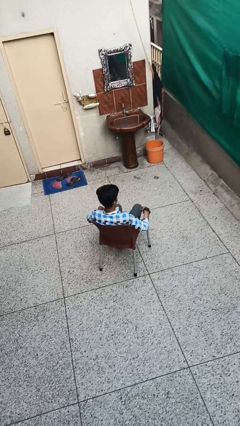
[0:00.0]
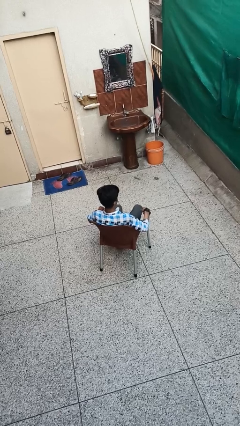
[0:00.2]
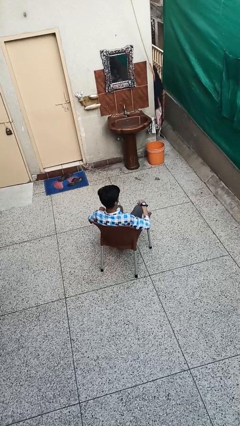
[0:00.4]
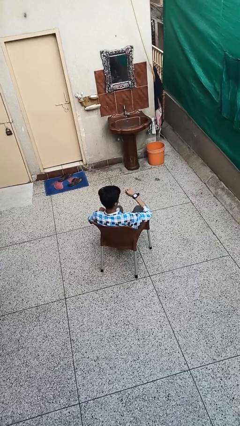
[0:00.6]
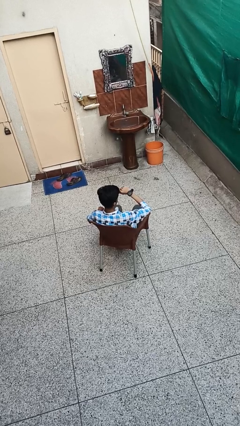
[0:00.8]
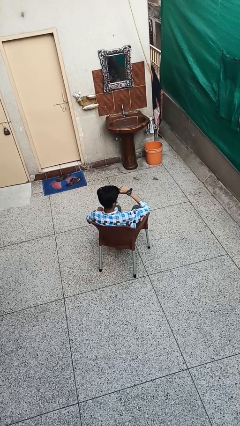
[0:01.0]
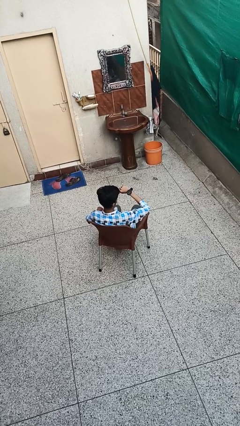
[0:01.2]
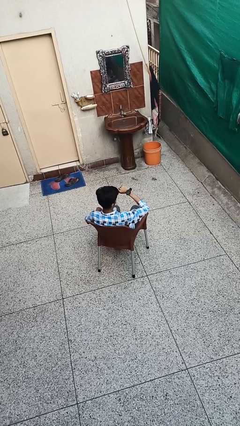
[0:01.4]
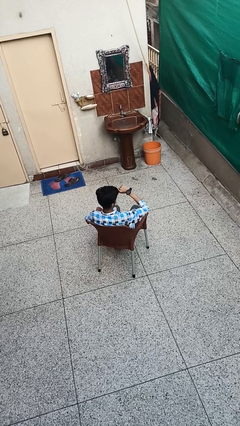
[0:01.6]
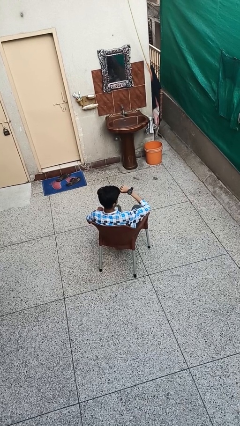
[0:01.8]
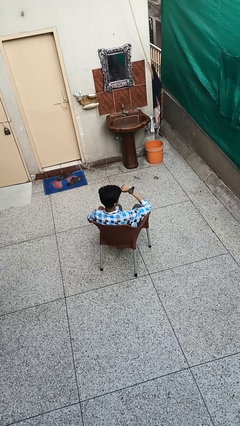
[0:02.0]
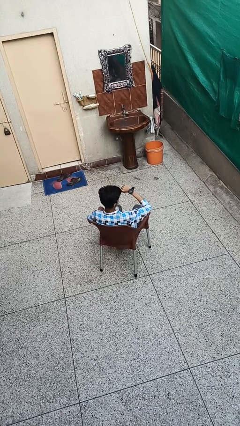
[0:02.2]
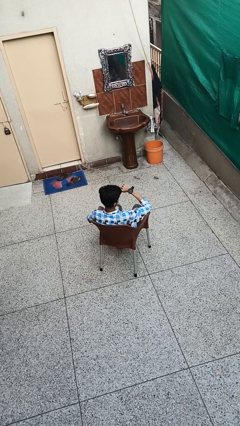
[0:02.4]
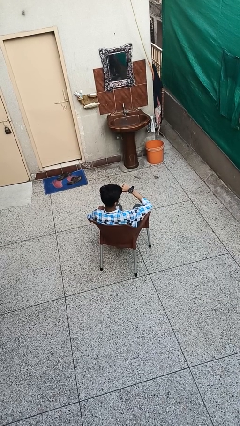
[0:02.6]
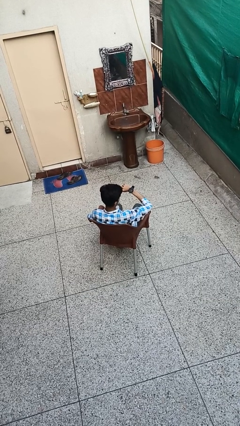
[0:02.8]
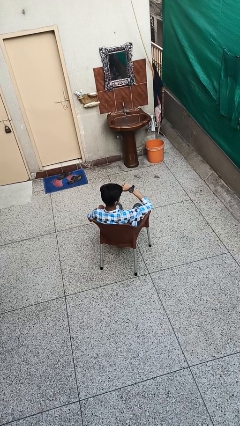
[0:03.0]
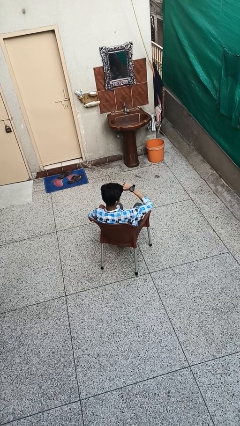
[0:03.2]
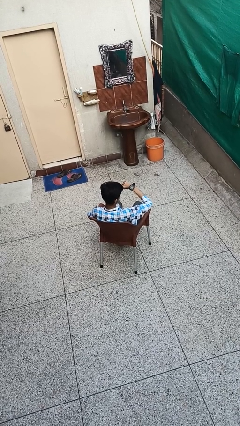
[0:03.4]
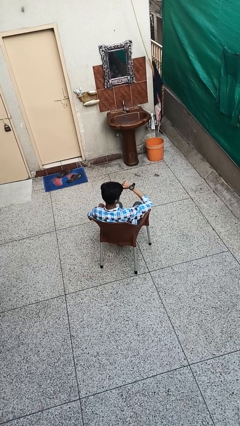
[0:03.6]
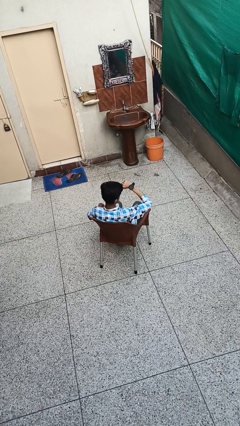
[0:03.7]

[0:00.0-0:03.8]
person looks at wristwatch

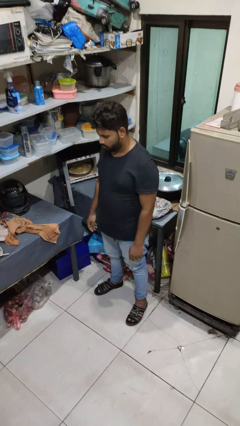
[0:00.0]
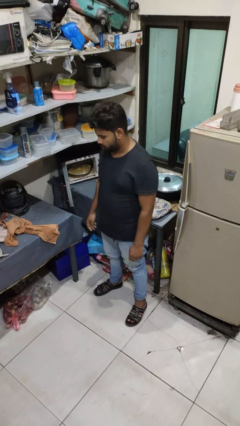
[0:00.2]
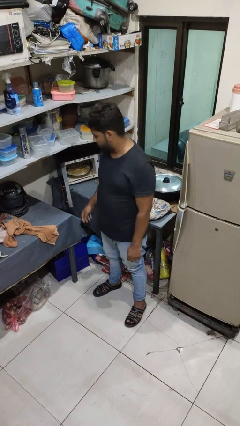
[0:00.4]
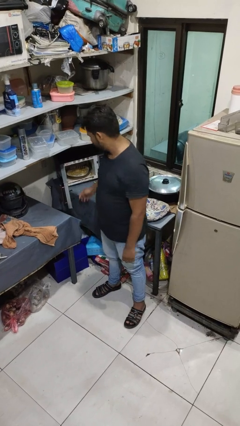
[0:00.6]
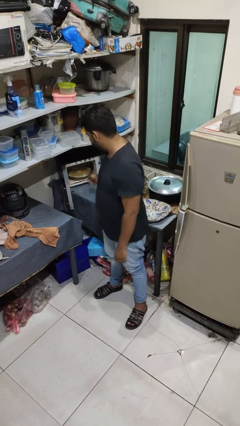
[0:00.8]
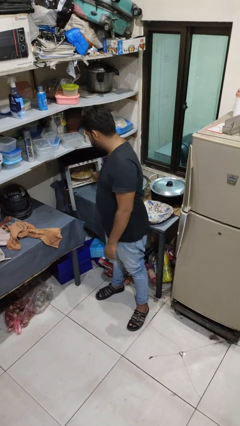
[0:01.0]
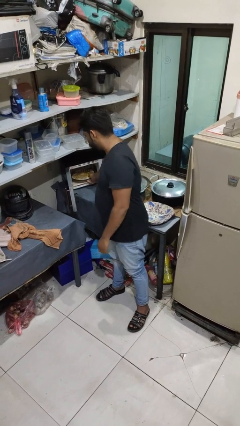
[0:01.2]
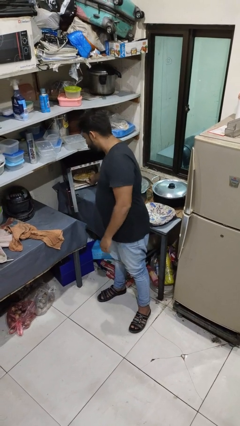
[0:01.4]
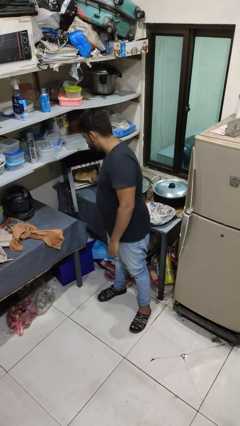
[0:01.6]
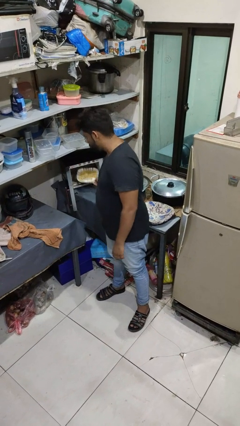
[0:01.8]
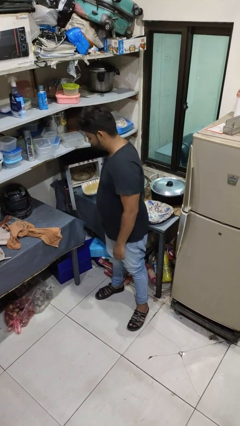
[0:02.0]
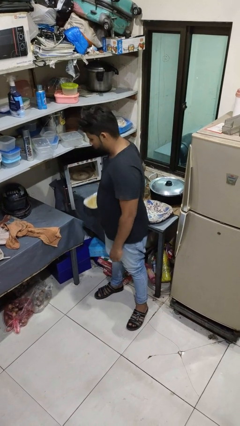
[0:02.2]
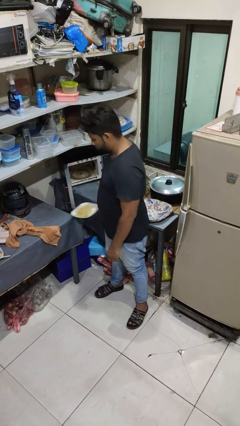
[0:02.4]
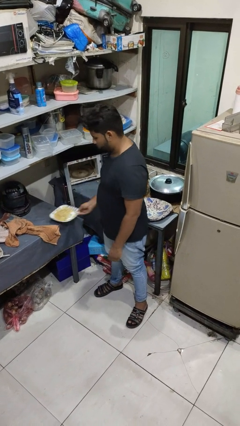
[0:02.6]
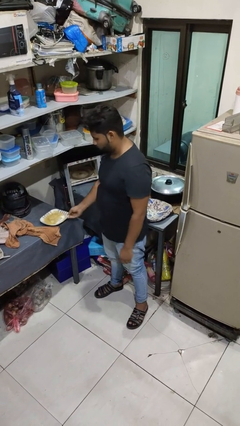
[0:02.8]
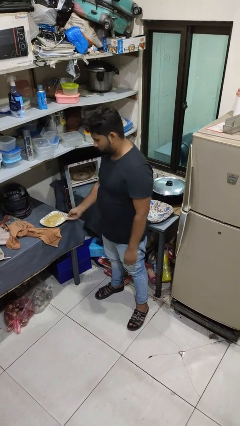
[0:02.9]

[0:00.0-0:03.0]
person takes object from microwave

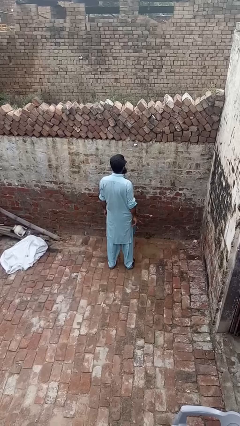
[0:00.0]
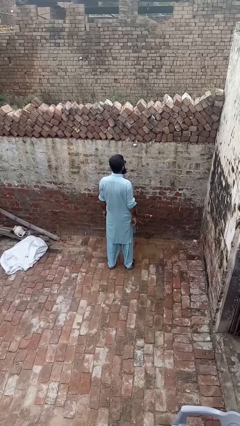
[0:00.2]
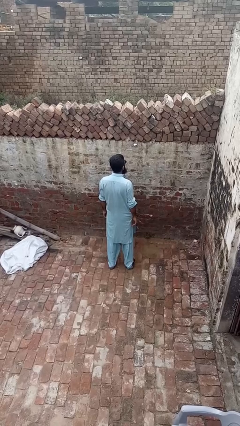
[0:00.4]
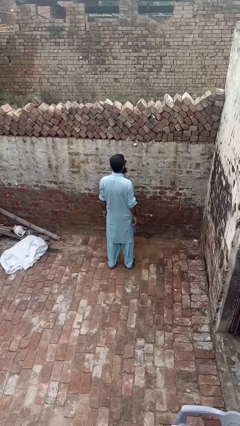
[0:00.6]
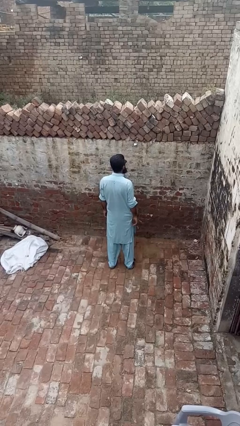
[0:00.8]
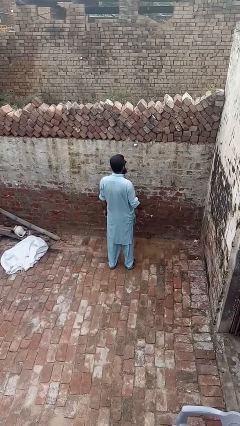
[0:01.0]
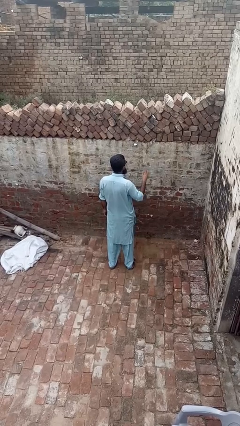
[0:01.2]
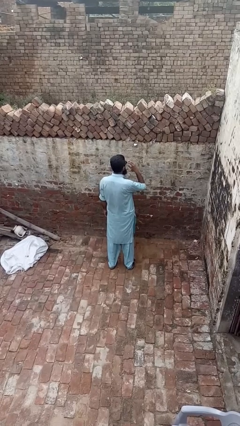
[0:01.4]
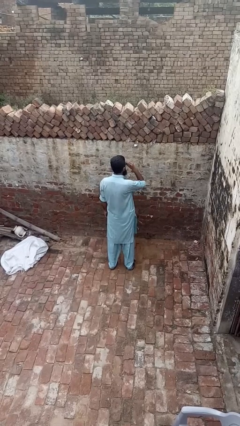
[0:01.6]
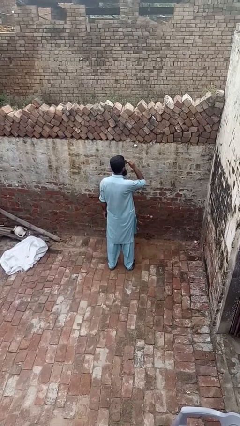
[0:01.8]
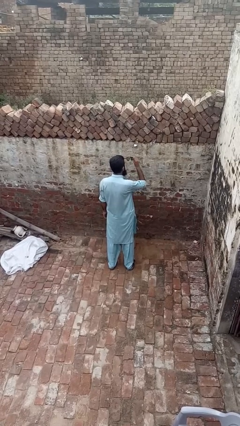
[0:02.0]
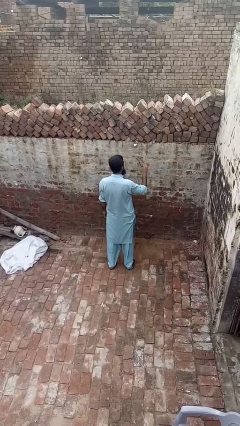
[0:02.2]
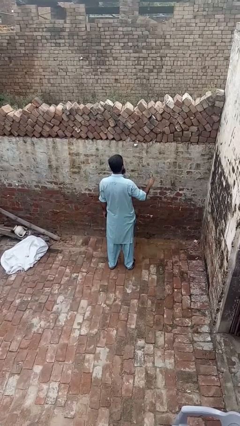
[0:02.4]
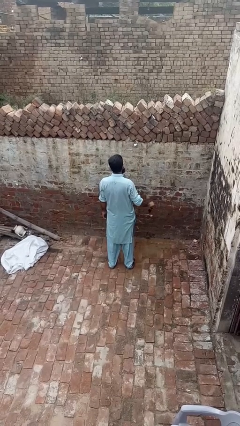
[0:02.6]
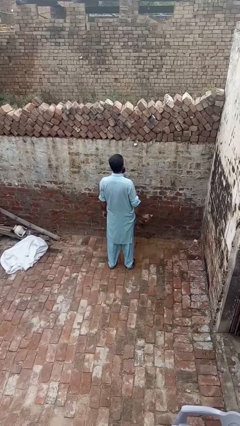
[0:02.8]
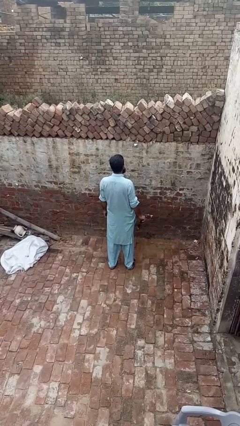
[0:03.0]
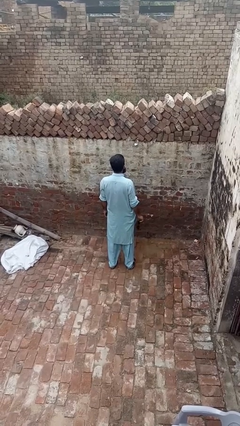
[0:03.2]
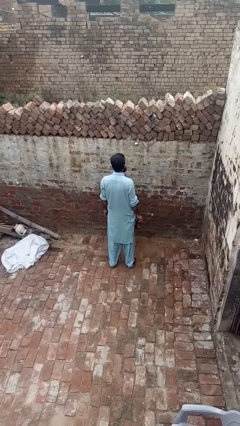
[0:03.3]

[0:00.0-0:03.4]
person takes off sunglasses

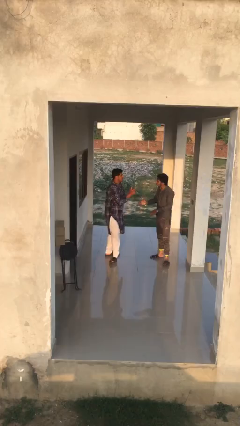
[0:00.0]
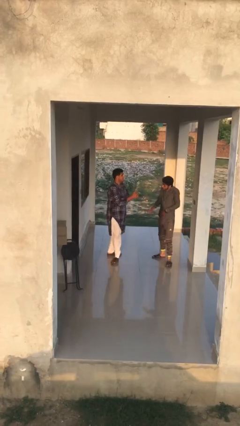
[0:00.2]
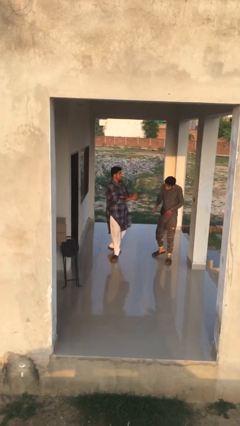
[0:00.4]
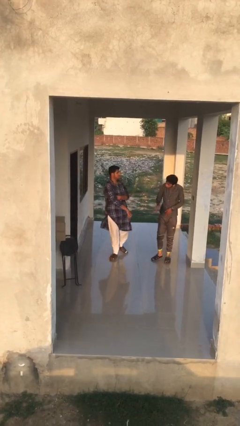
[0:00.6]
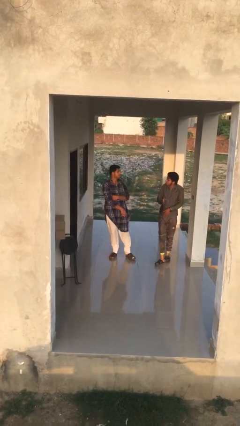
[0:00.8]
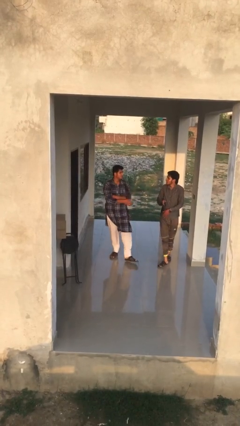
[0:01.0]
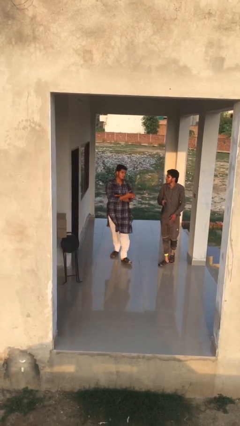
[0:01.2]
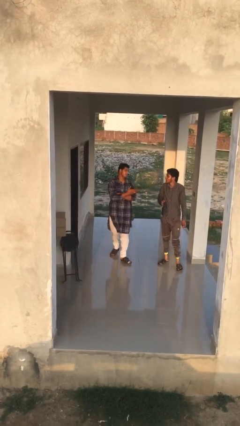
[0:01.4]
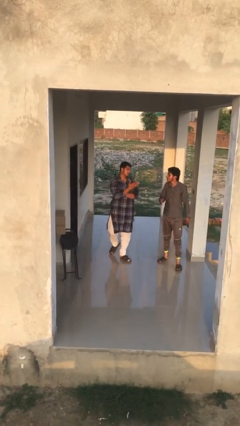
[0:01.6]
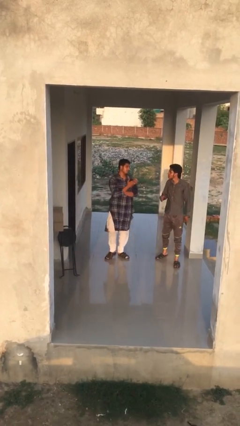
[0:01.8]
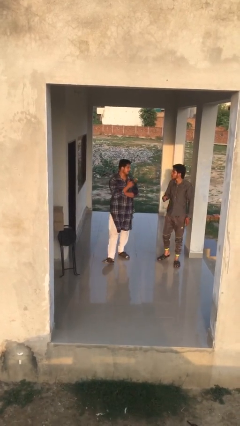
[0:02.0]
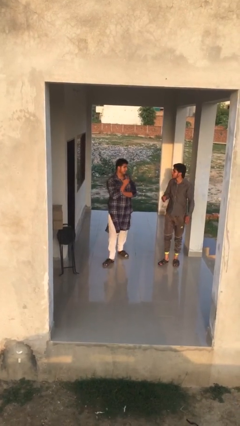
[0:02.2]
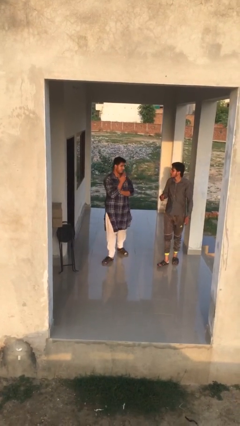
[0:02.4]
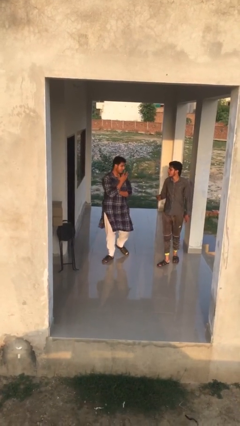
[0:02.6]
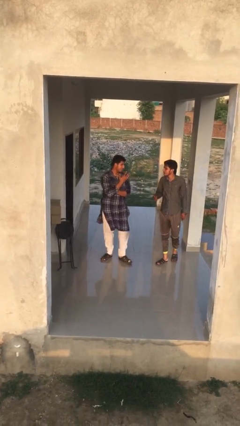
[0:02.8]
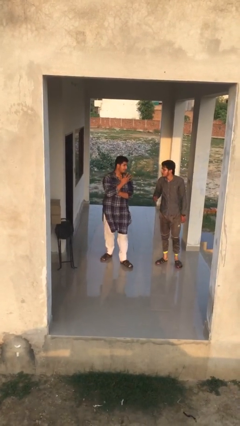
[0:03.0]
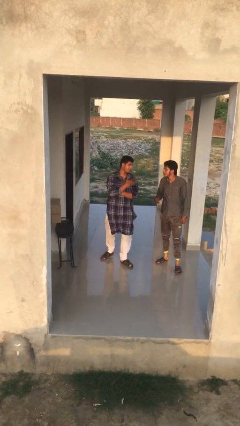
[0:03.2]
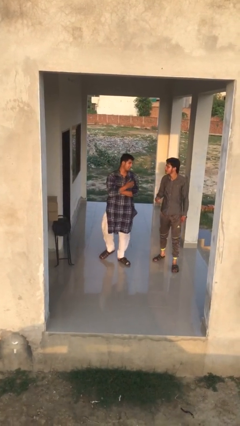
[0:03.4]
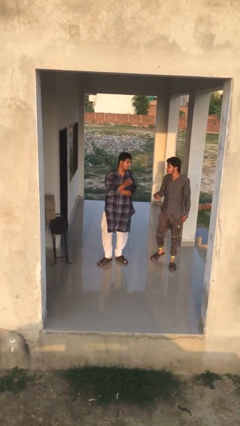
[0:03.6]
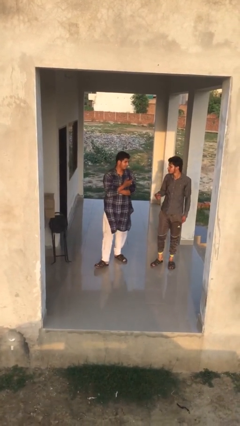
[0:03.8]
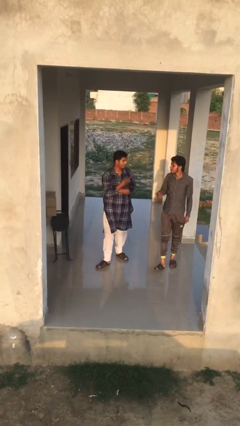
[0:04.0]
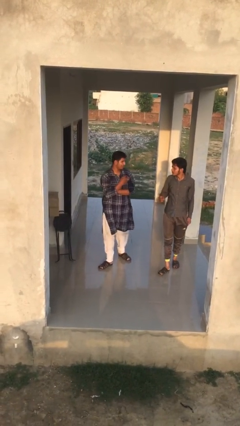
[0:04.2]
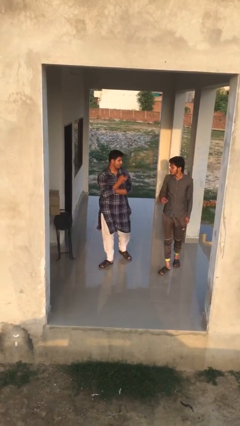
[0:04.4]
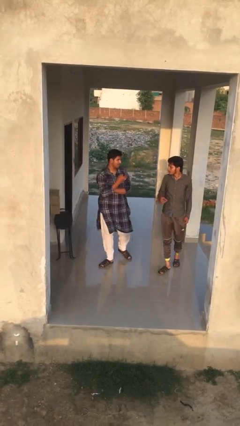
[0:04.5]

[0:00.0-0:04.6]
person talks to person

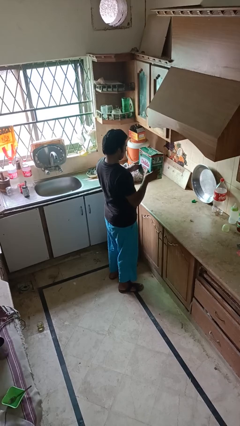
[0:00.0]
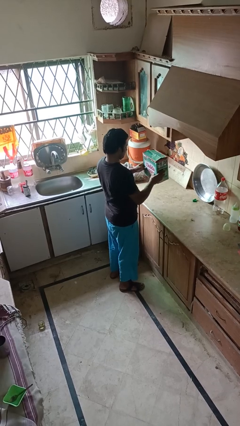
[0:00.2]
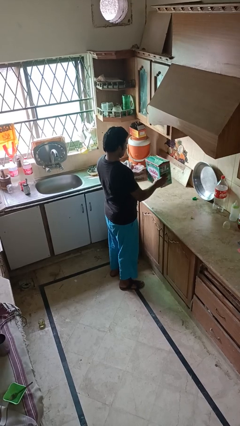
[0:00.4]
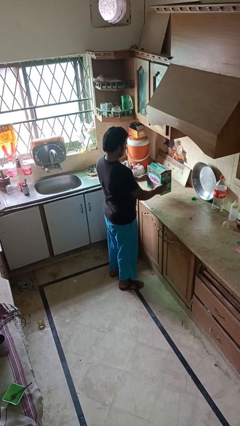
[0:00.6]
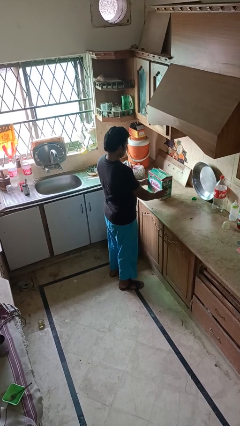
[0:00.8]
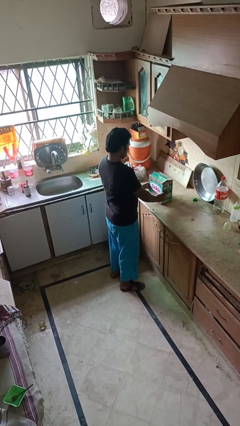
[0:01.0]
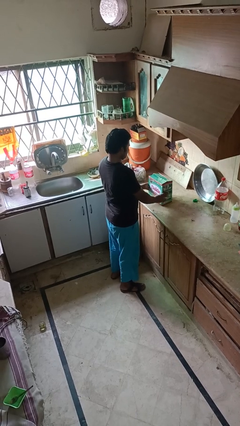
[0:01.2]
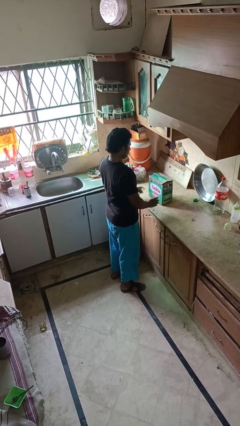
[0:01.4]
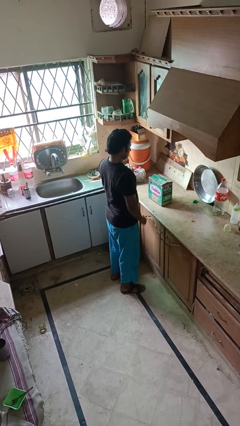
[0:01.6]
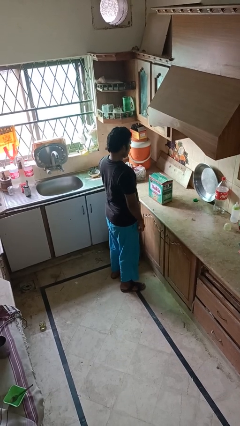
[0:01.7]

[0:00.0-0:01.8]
person puts down object on countertop

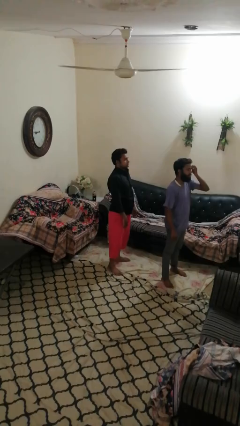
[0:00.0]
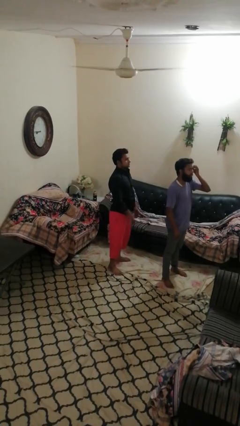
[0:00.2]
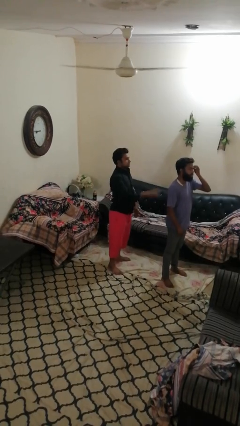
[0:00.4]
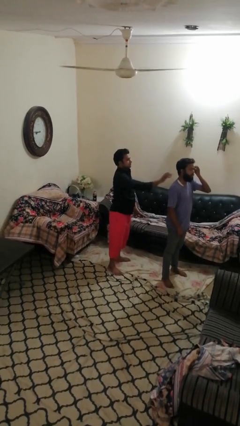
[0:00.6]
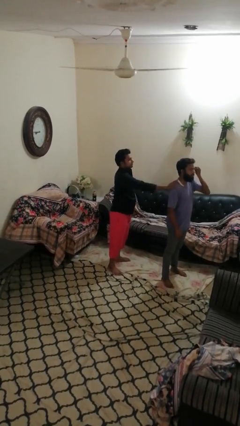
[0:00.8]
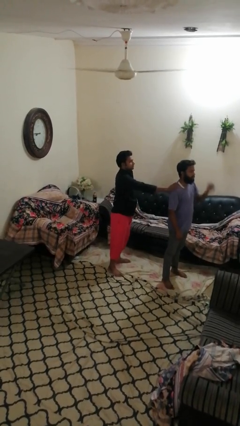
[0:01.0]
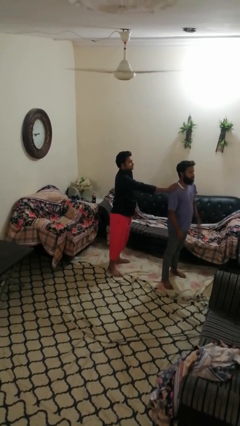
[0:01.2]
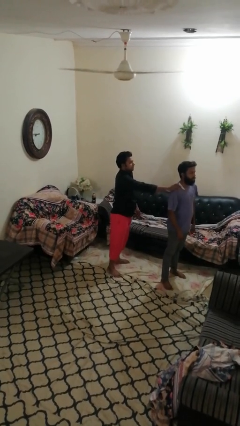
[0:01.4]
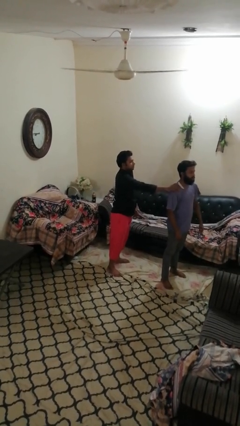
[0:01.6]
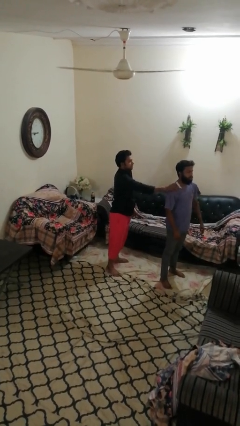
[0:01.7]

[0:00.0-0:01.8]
person grabs person by shoulder
